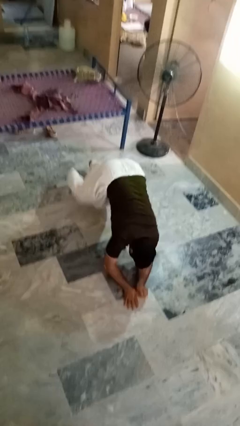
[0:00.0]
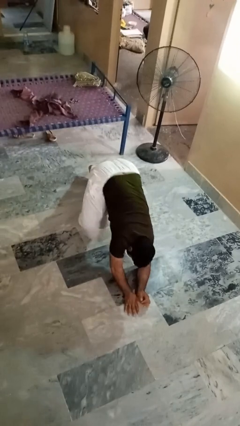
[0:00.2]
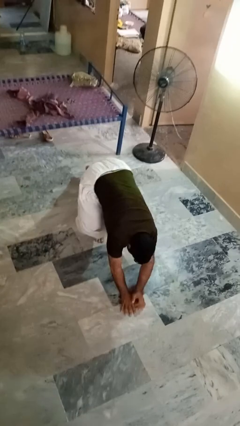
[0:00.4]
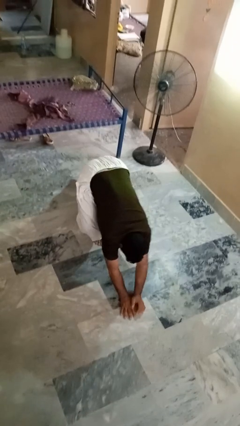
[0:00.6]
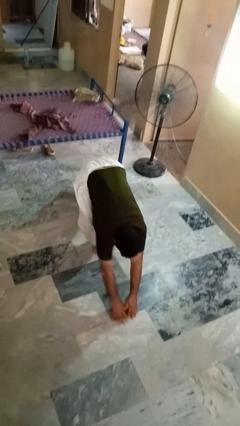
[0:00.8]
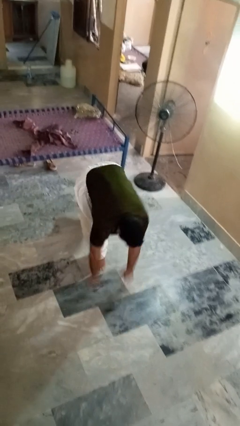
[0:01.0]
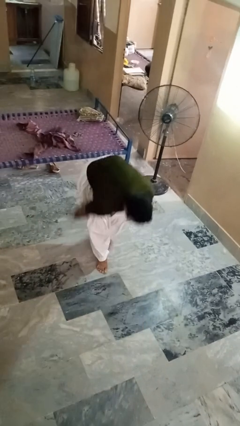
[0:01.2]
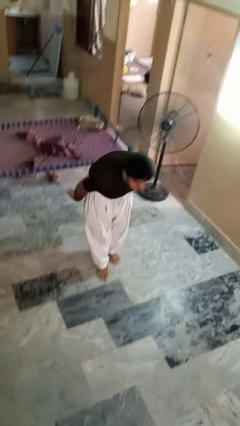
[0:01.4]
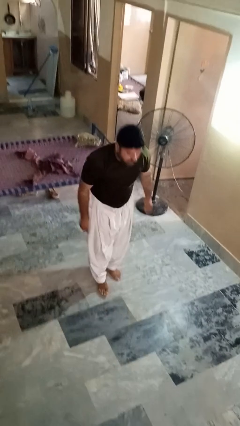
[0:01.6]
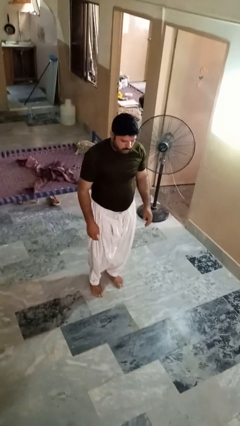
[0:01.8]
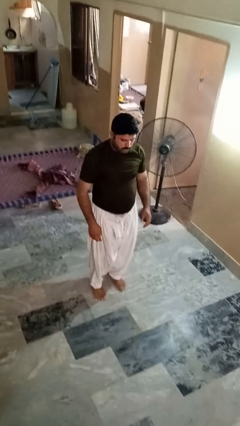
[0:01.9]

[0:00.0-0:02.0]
person stands up from floor

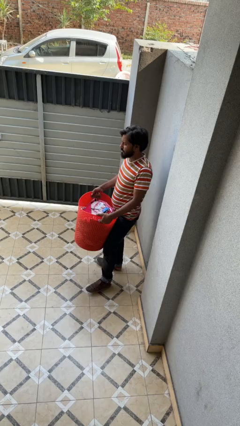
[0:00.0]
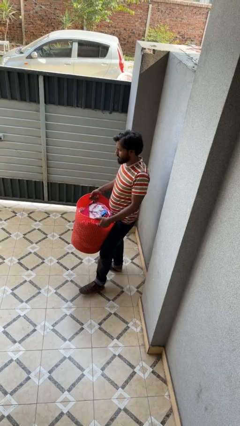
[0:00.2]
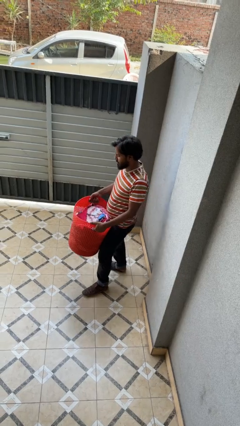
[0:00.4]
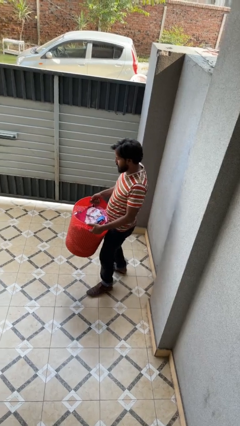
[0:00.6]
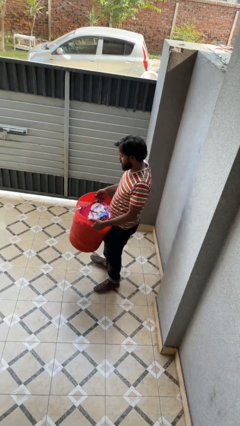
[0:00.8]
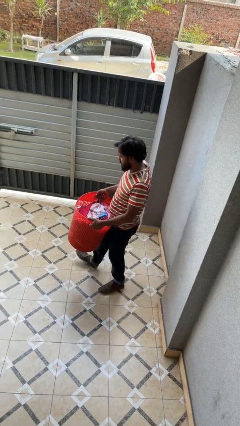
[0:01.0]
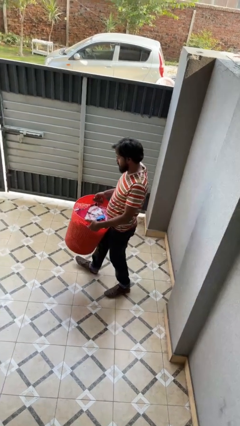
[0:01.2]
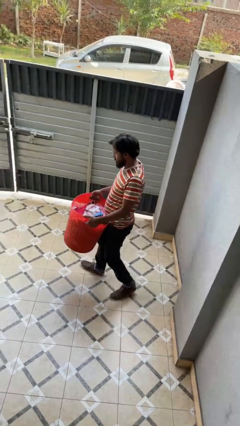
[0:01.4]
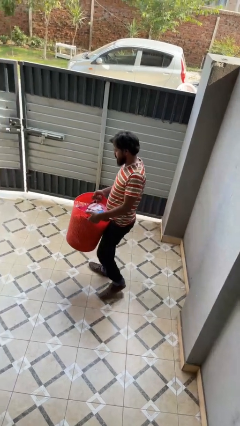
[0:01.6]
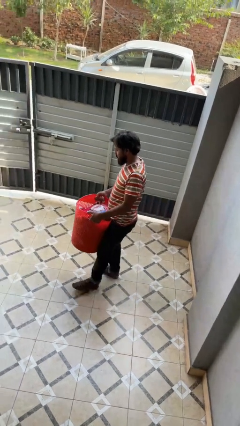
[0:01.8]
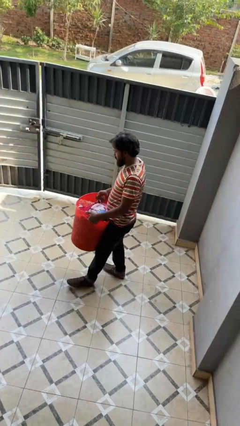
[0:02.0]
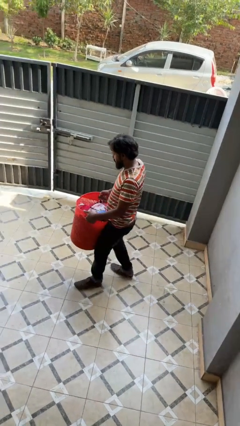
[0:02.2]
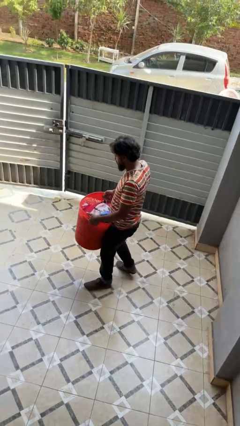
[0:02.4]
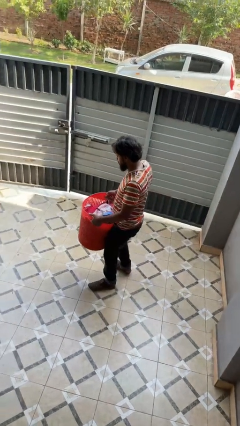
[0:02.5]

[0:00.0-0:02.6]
person carries laundry basket

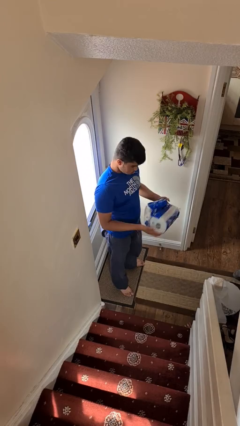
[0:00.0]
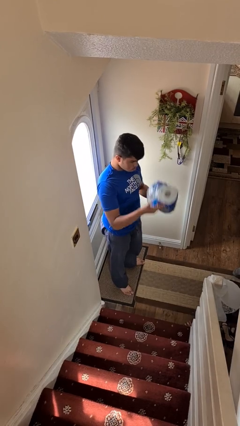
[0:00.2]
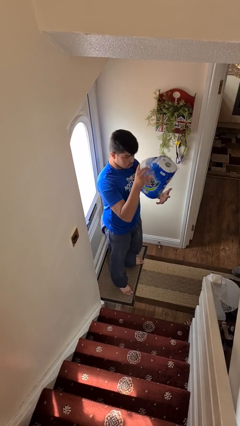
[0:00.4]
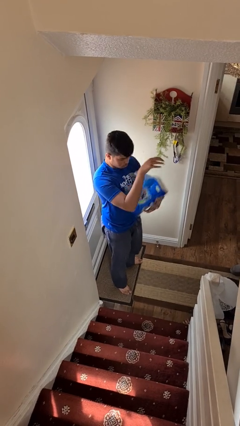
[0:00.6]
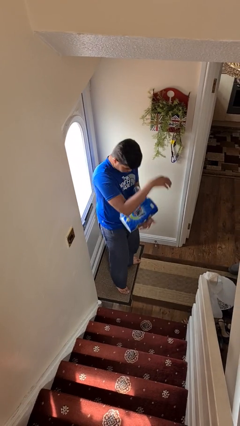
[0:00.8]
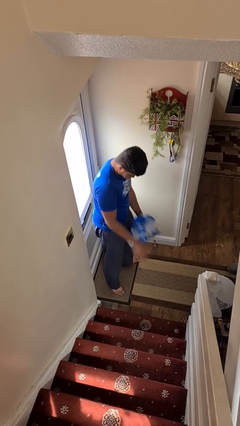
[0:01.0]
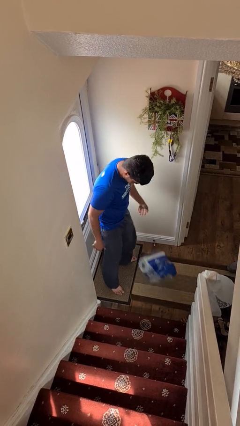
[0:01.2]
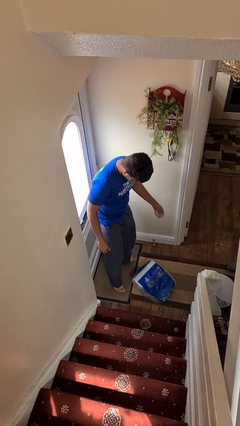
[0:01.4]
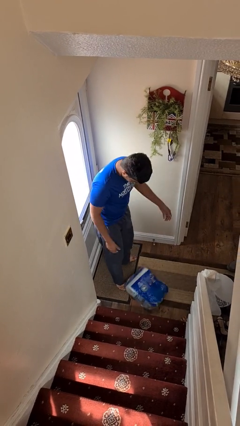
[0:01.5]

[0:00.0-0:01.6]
person drops object

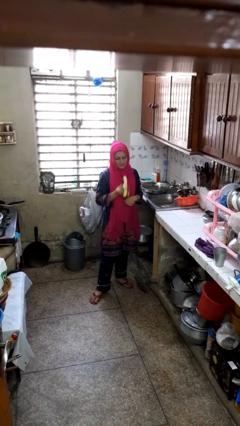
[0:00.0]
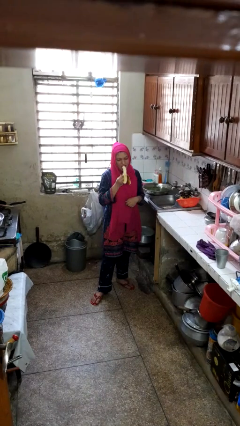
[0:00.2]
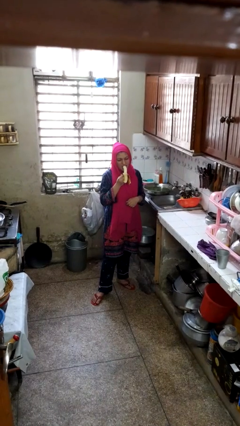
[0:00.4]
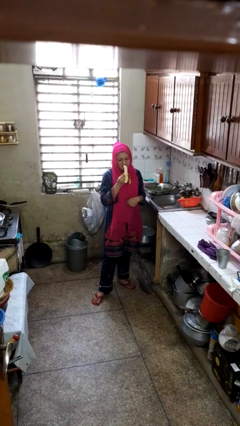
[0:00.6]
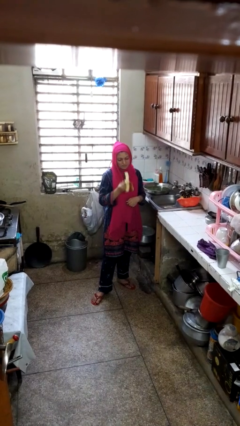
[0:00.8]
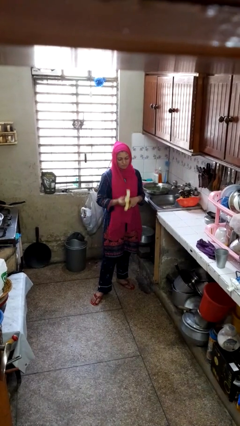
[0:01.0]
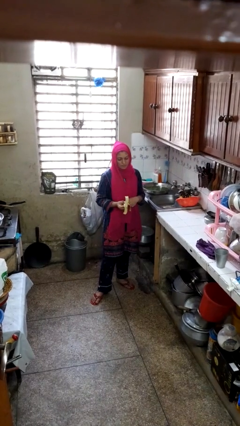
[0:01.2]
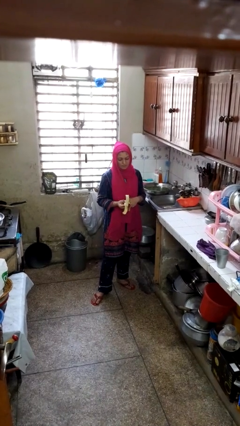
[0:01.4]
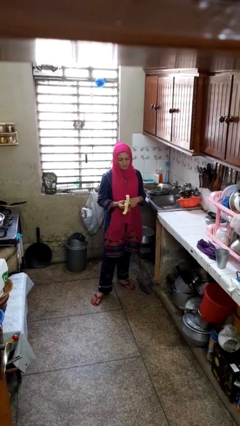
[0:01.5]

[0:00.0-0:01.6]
person eats banana

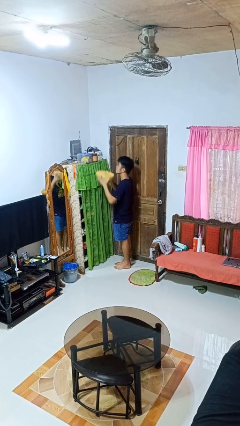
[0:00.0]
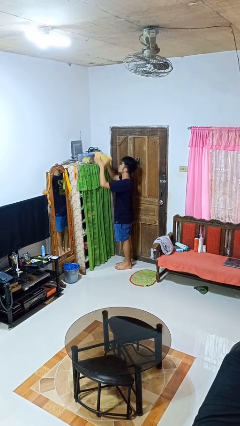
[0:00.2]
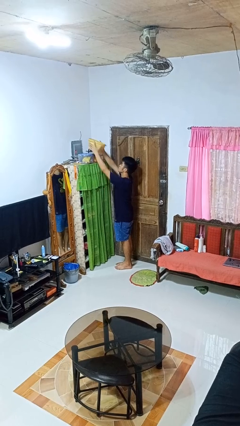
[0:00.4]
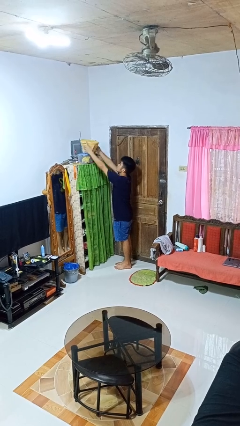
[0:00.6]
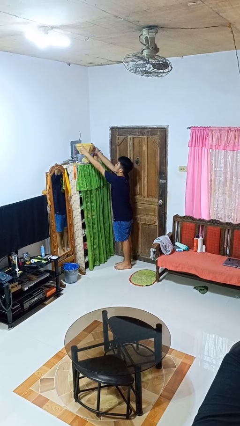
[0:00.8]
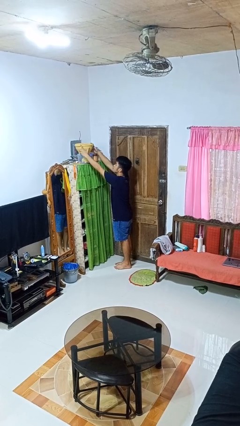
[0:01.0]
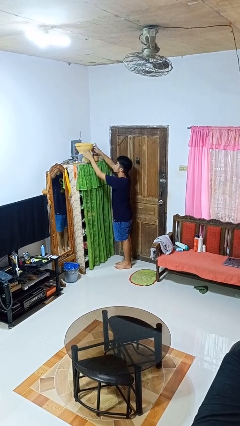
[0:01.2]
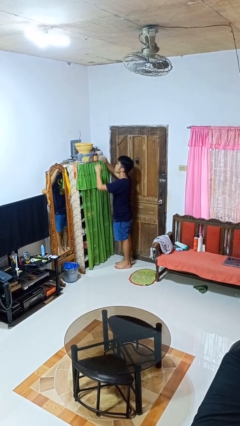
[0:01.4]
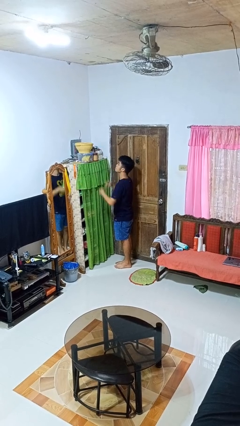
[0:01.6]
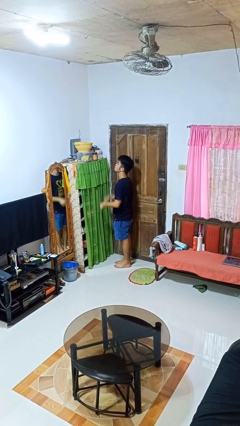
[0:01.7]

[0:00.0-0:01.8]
person puts down object on shelf

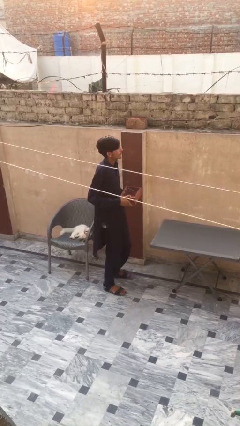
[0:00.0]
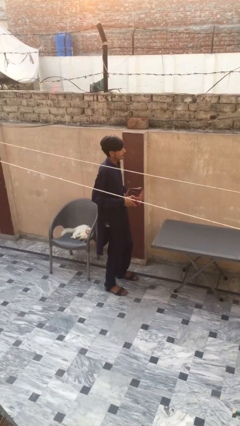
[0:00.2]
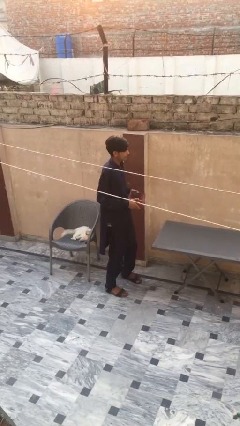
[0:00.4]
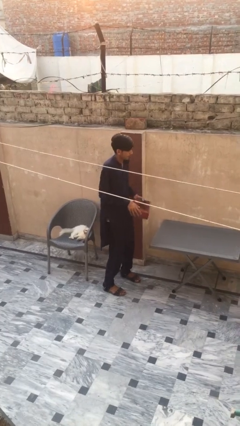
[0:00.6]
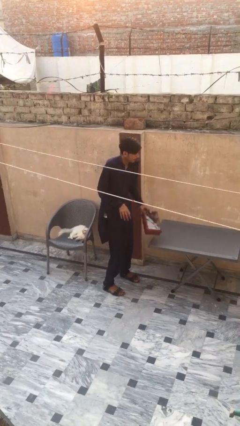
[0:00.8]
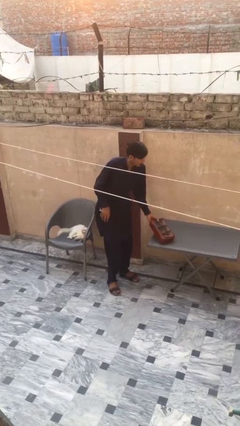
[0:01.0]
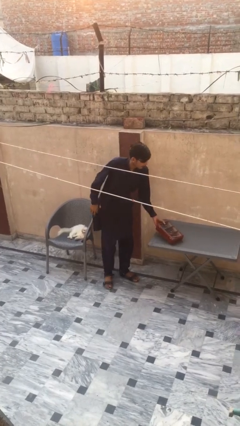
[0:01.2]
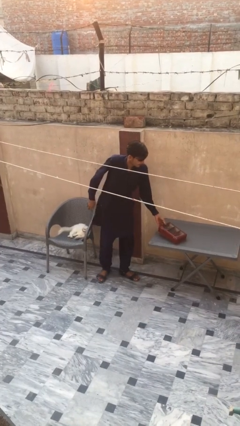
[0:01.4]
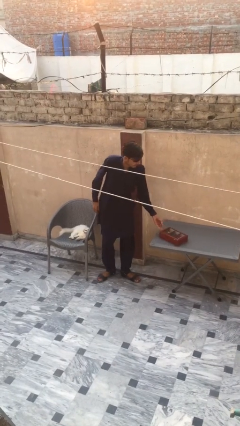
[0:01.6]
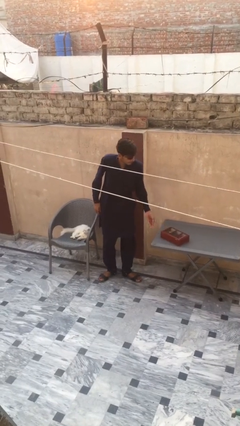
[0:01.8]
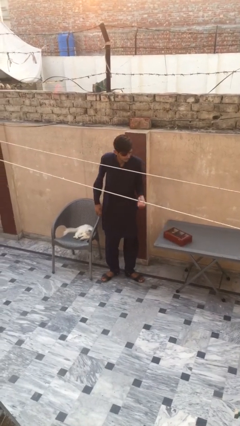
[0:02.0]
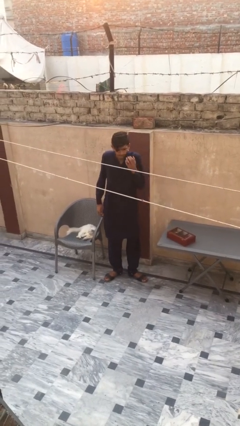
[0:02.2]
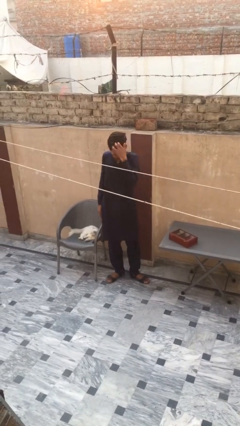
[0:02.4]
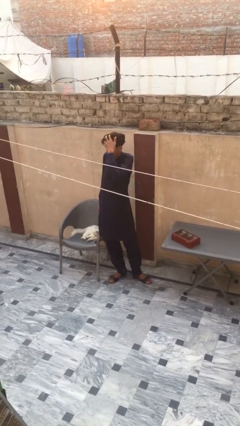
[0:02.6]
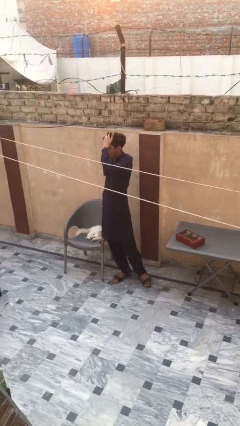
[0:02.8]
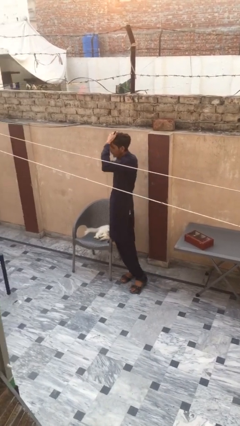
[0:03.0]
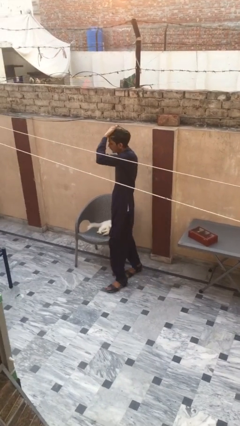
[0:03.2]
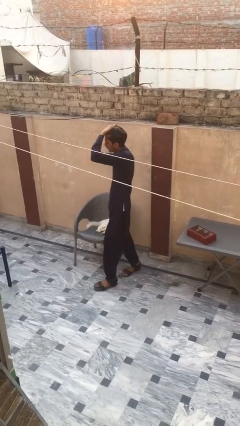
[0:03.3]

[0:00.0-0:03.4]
person puts down object on table

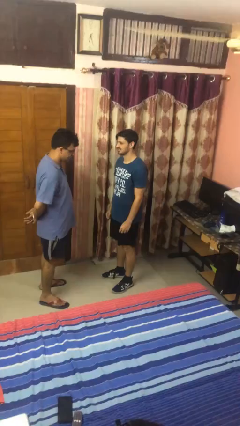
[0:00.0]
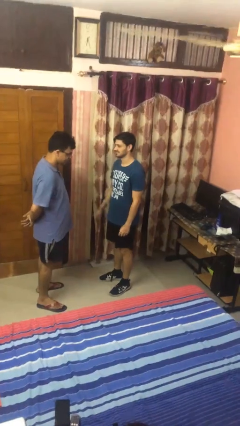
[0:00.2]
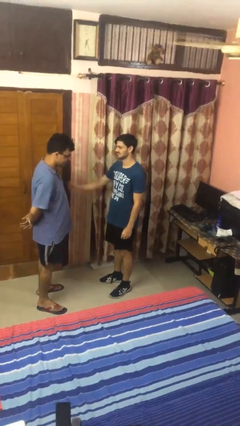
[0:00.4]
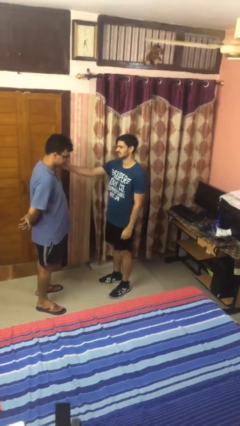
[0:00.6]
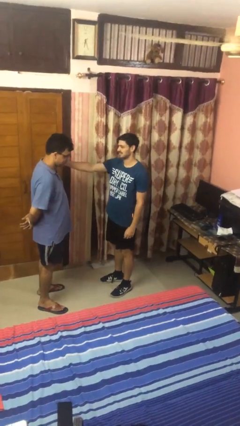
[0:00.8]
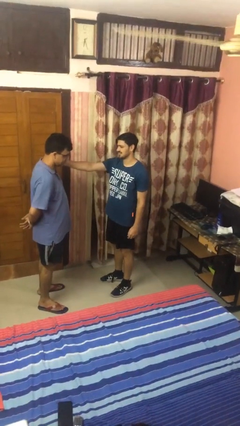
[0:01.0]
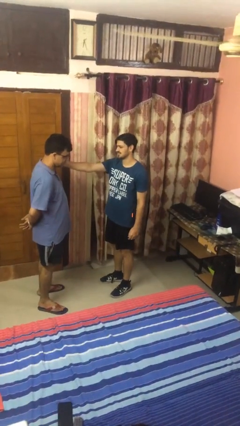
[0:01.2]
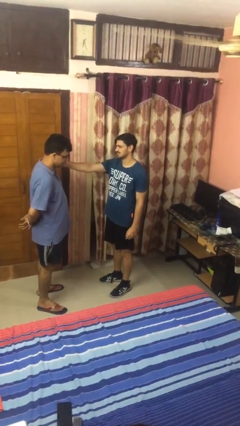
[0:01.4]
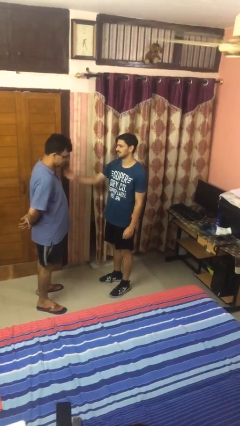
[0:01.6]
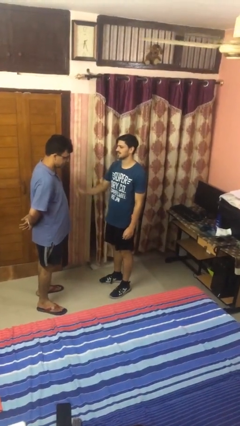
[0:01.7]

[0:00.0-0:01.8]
person touches face of person

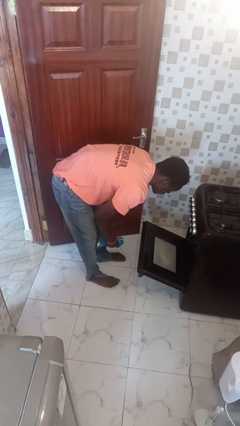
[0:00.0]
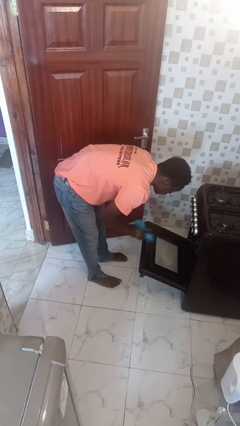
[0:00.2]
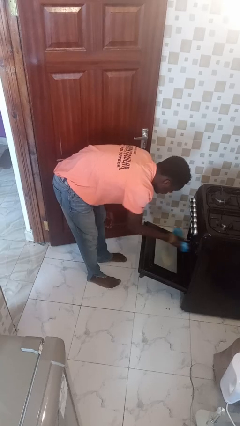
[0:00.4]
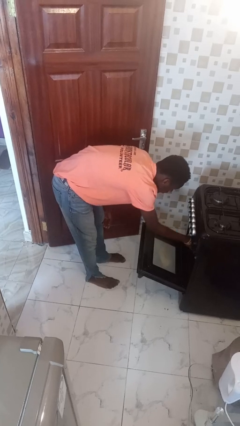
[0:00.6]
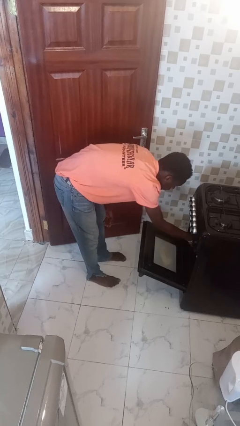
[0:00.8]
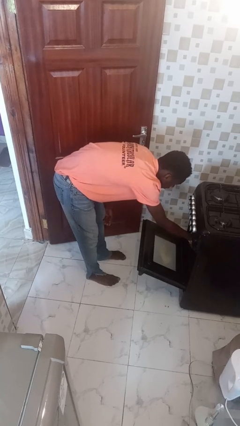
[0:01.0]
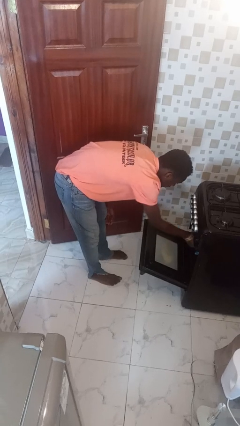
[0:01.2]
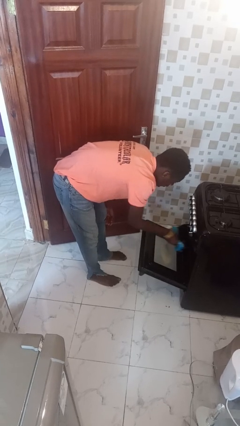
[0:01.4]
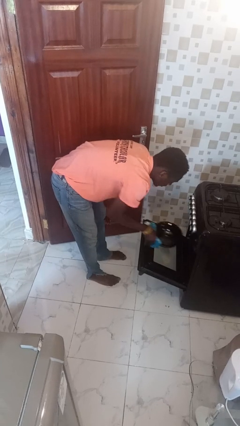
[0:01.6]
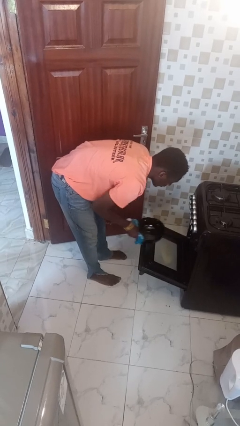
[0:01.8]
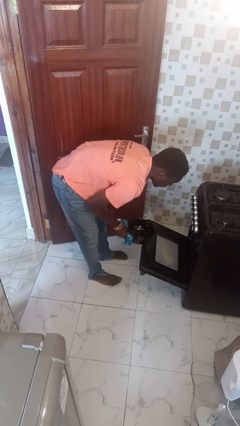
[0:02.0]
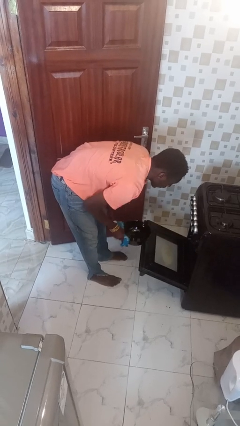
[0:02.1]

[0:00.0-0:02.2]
person takes object from oven
